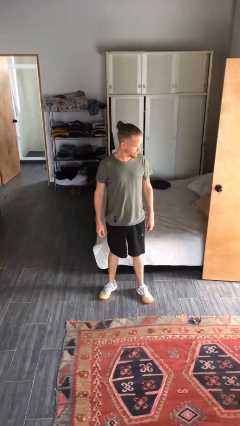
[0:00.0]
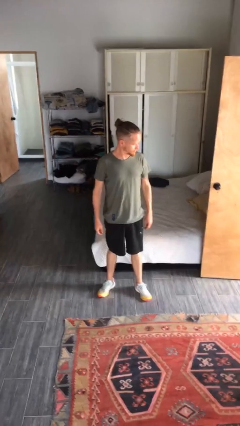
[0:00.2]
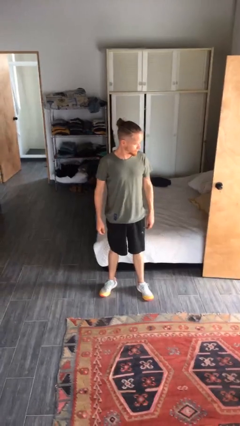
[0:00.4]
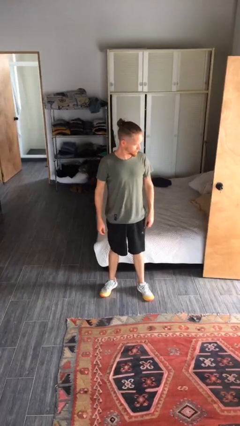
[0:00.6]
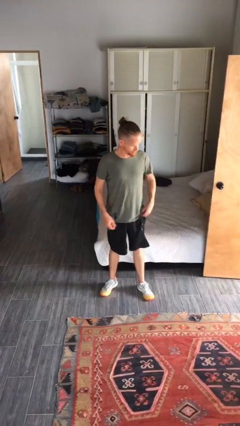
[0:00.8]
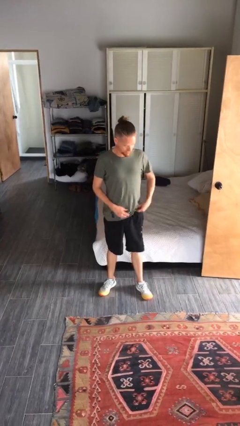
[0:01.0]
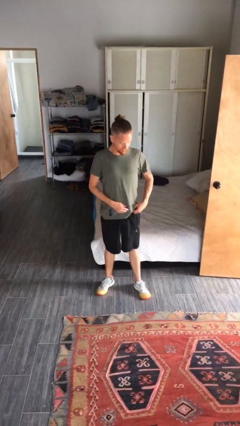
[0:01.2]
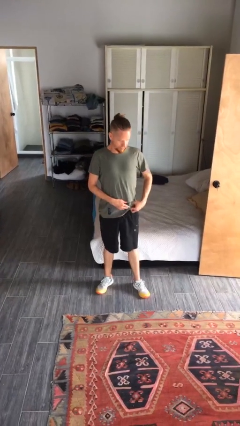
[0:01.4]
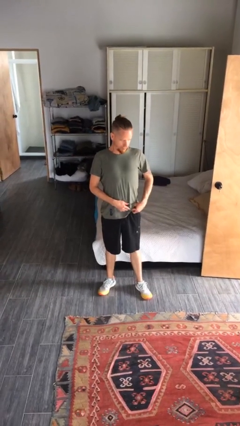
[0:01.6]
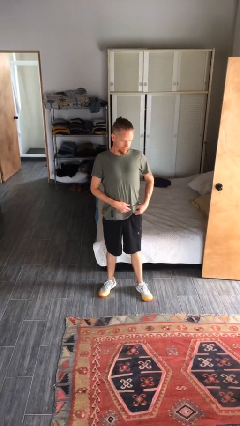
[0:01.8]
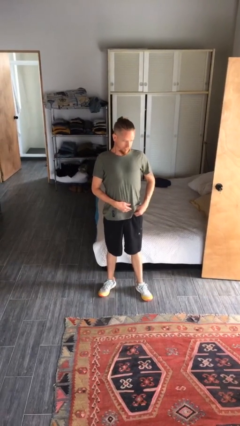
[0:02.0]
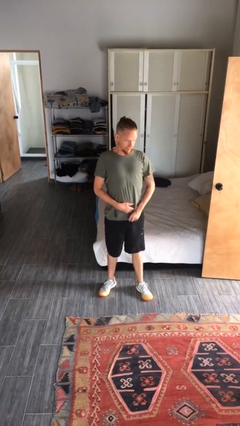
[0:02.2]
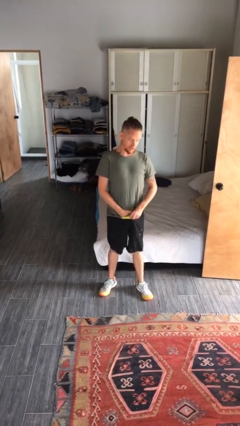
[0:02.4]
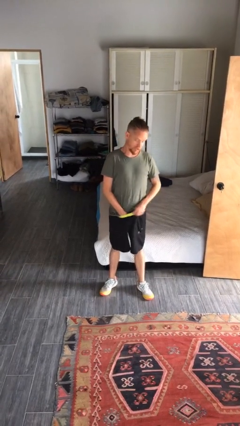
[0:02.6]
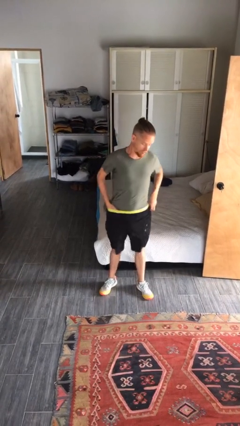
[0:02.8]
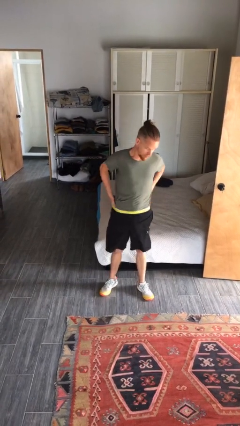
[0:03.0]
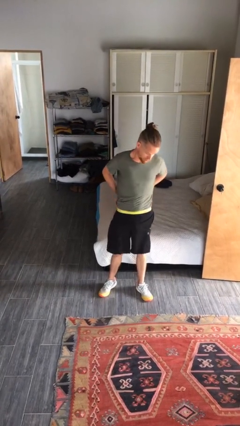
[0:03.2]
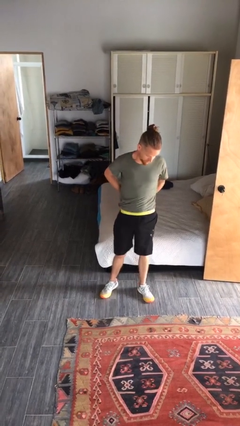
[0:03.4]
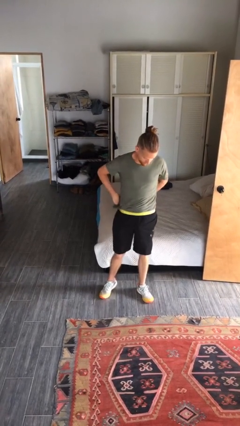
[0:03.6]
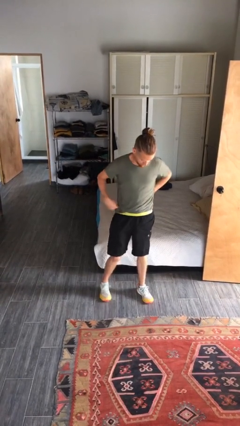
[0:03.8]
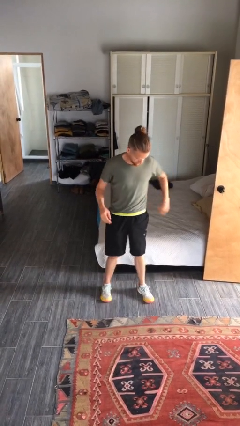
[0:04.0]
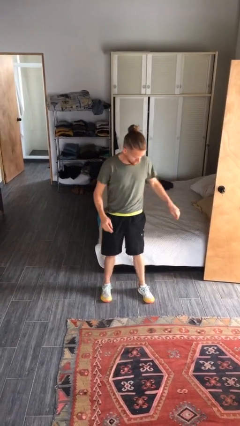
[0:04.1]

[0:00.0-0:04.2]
person tucks in shirt

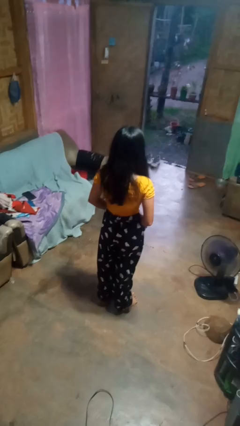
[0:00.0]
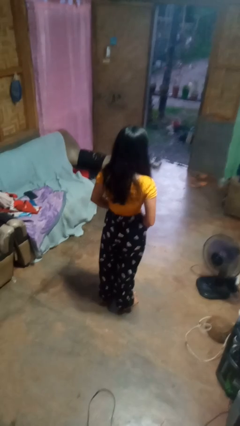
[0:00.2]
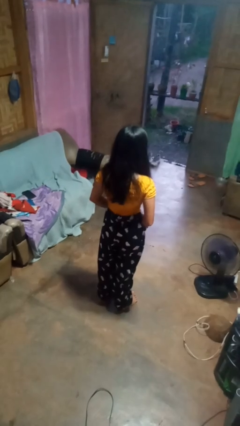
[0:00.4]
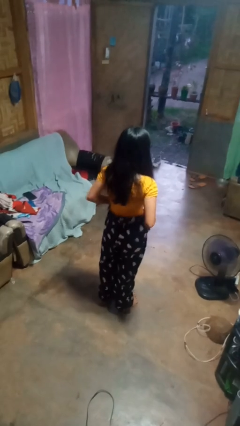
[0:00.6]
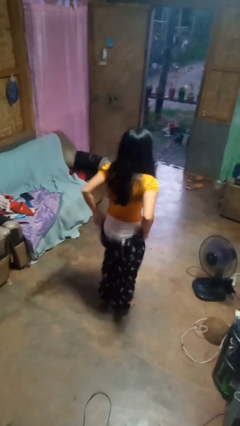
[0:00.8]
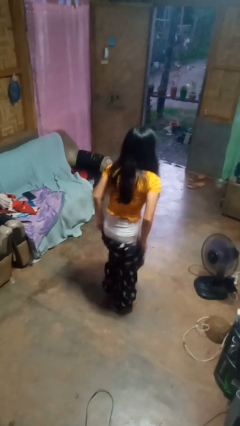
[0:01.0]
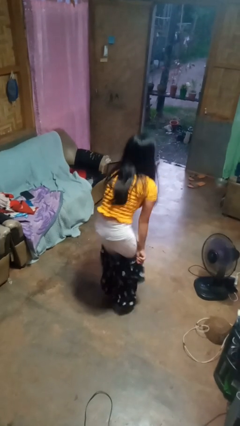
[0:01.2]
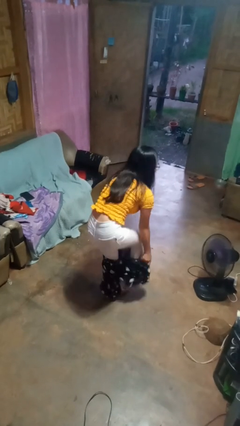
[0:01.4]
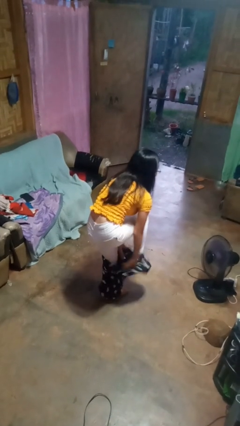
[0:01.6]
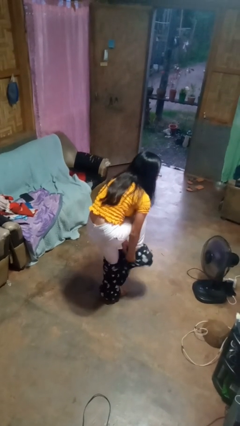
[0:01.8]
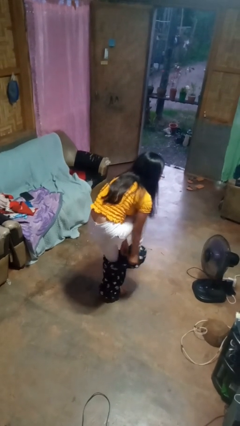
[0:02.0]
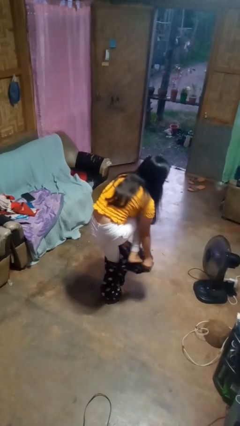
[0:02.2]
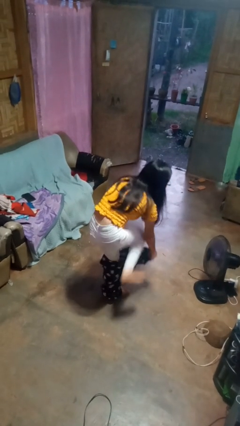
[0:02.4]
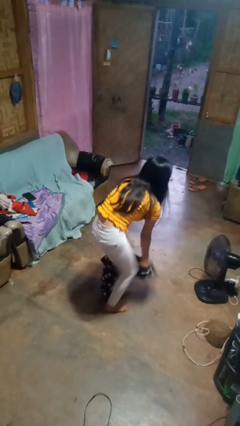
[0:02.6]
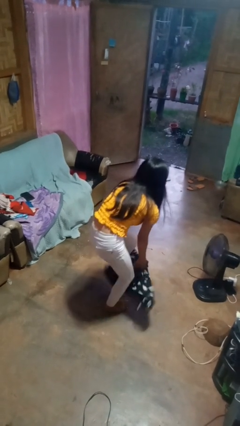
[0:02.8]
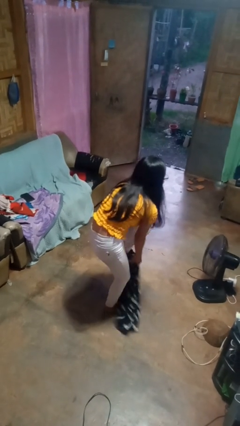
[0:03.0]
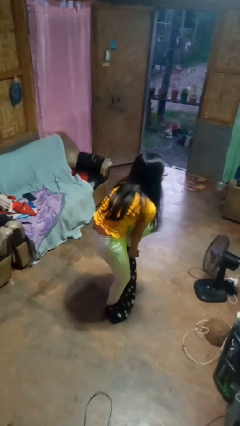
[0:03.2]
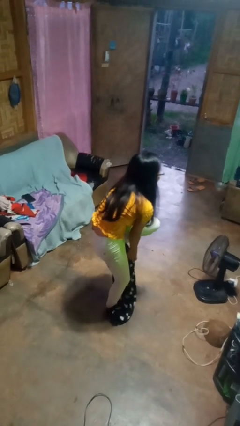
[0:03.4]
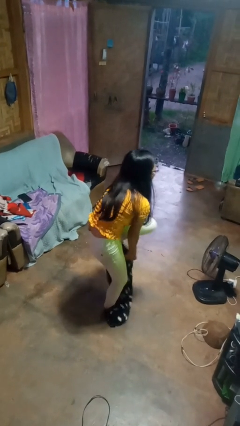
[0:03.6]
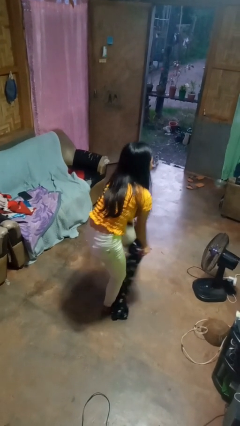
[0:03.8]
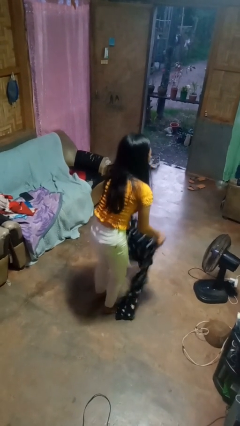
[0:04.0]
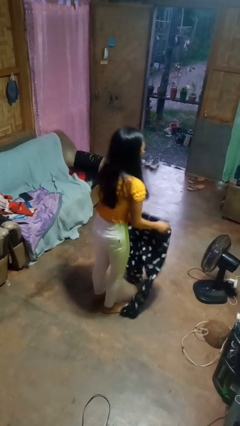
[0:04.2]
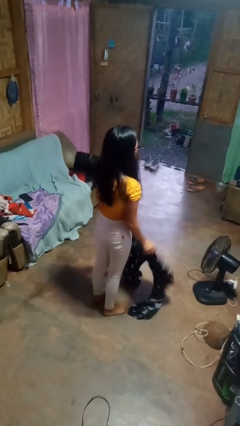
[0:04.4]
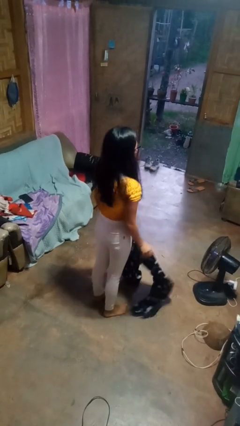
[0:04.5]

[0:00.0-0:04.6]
person takes off pants

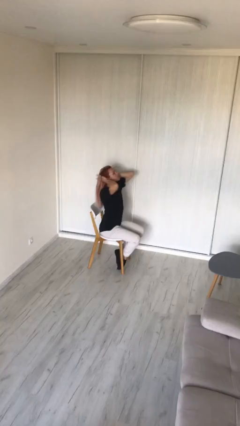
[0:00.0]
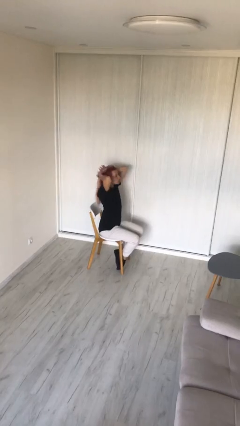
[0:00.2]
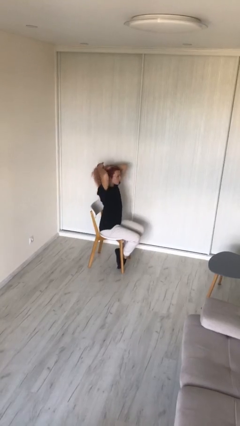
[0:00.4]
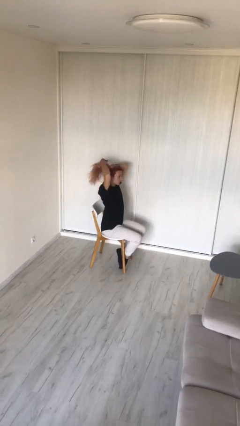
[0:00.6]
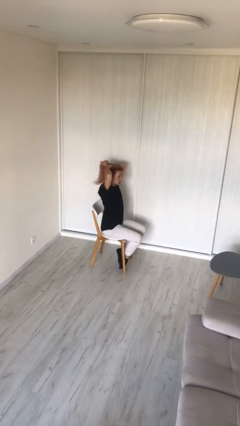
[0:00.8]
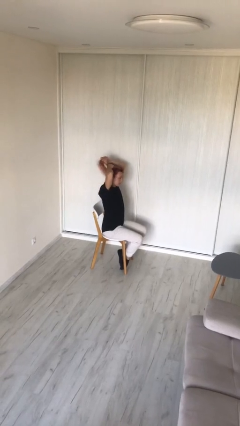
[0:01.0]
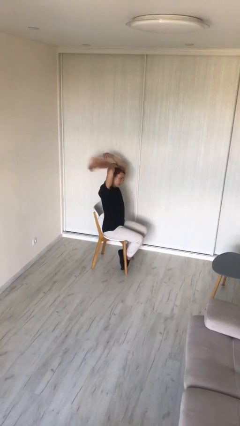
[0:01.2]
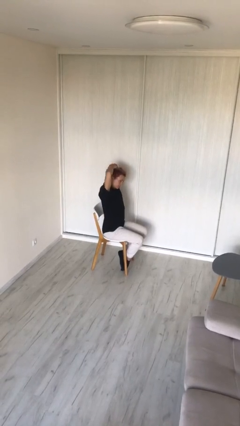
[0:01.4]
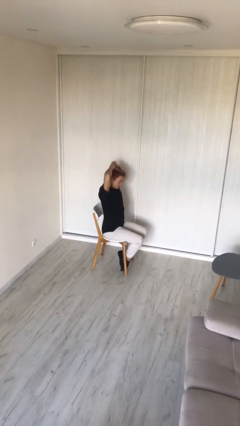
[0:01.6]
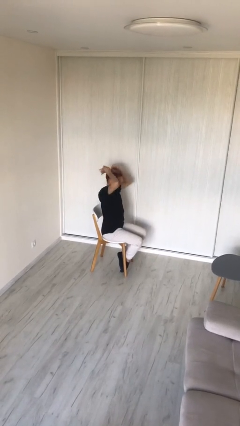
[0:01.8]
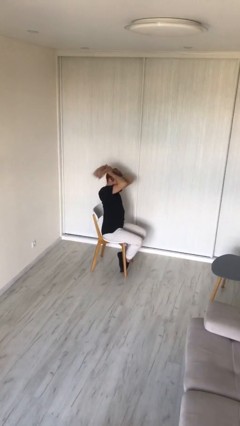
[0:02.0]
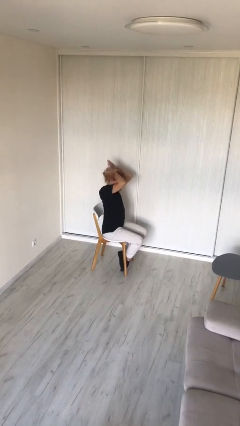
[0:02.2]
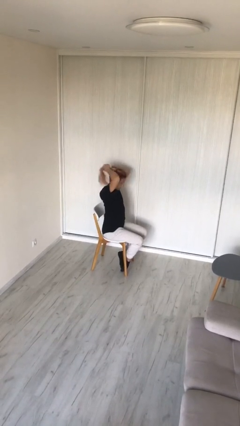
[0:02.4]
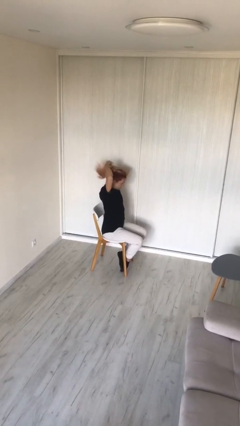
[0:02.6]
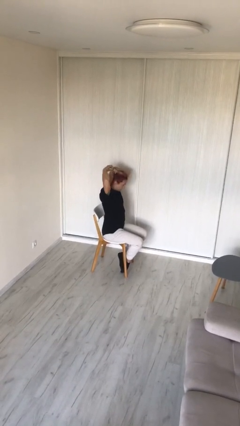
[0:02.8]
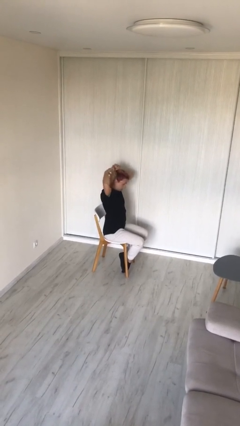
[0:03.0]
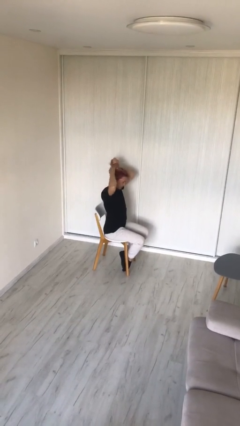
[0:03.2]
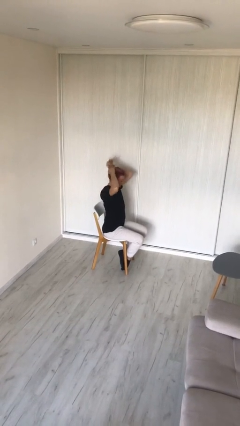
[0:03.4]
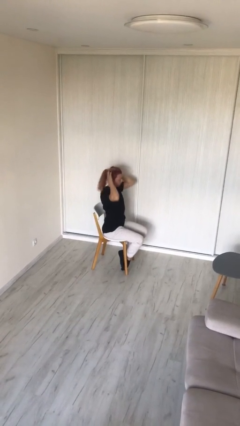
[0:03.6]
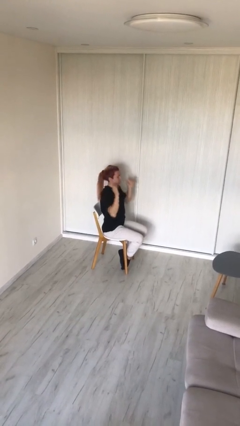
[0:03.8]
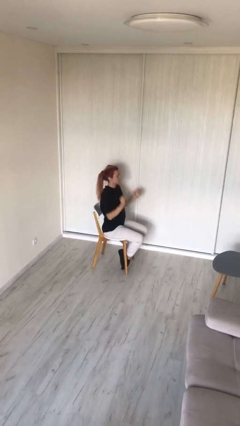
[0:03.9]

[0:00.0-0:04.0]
person puts hair in ponytail

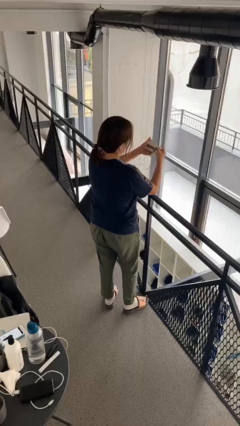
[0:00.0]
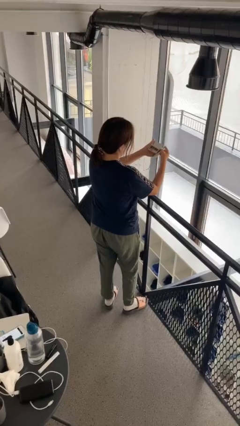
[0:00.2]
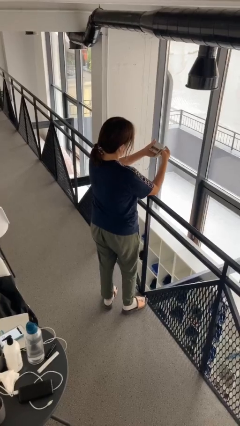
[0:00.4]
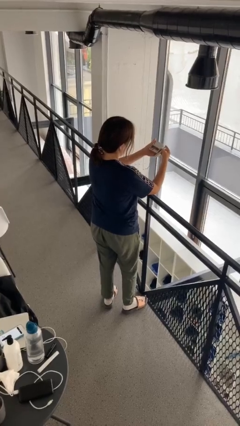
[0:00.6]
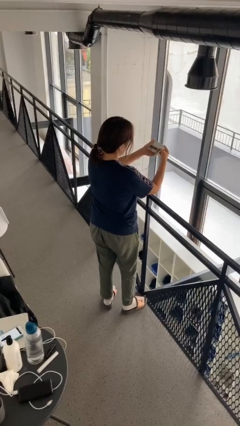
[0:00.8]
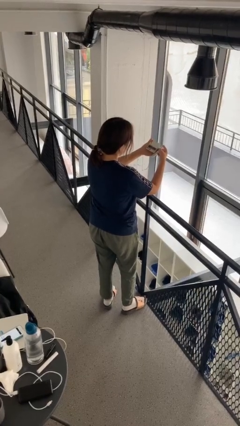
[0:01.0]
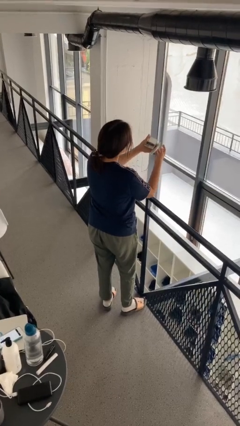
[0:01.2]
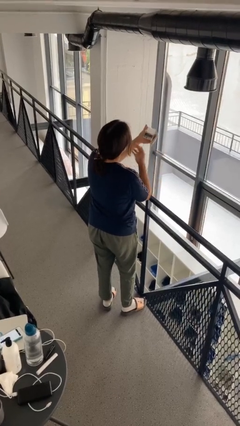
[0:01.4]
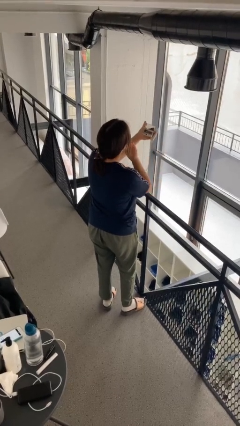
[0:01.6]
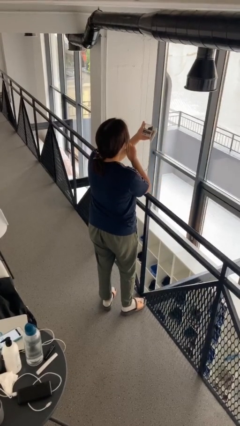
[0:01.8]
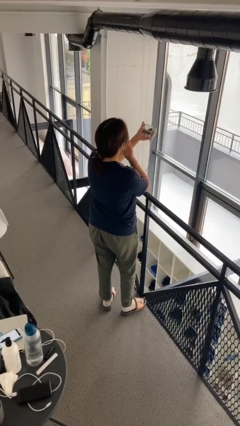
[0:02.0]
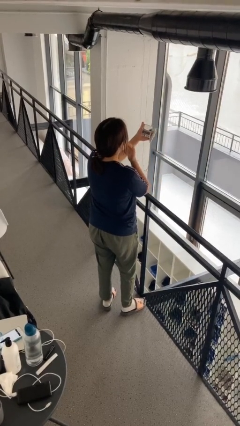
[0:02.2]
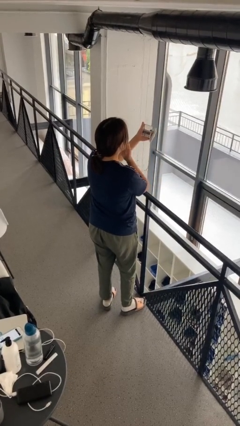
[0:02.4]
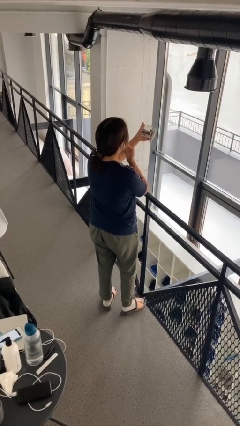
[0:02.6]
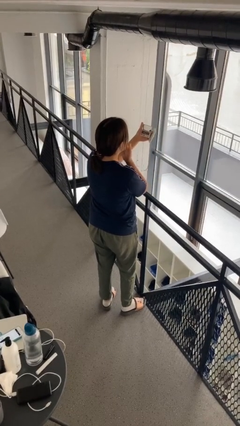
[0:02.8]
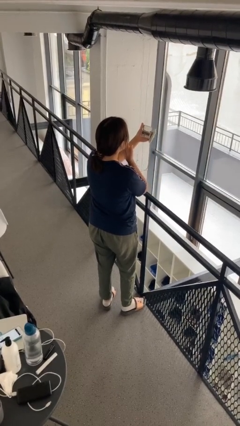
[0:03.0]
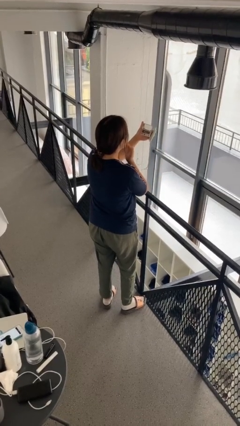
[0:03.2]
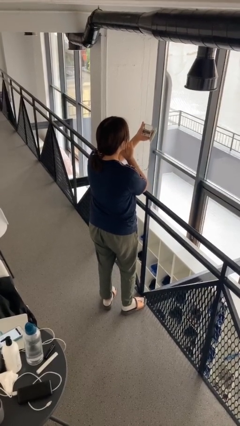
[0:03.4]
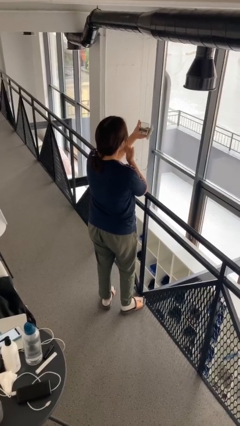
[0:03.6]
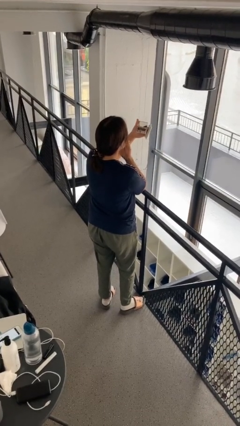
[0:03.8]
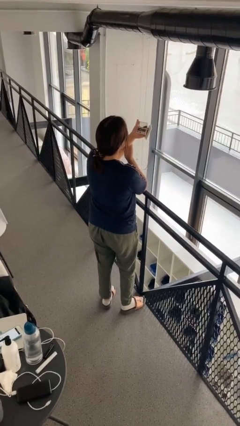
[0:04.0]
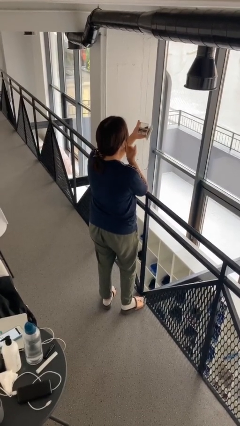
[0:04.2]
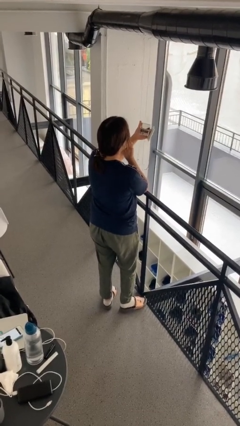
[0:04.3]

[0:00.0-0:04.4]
person applies foundation makeup

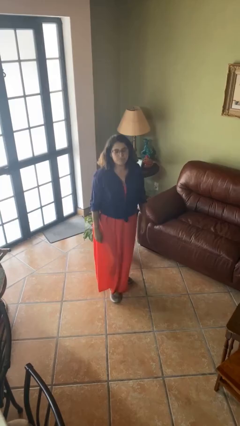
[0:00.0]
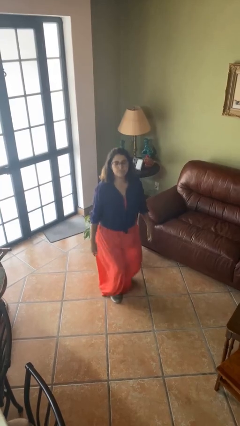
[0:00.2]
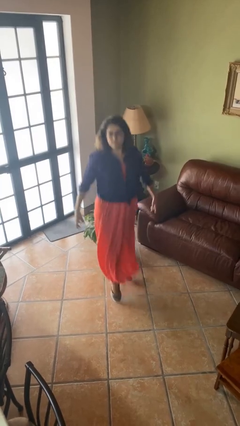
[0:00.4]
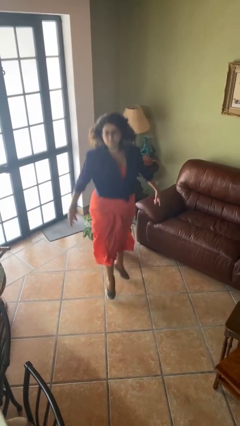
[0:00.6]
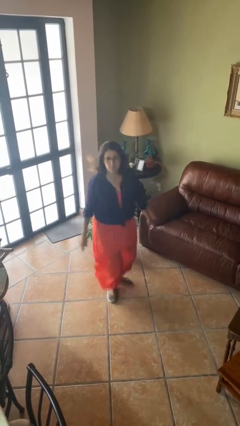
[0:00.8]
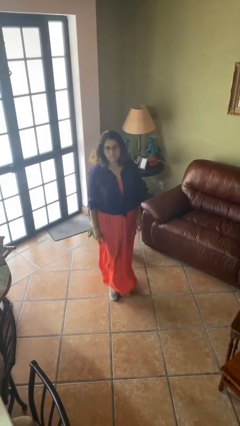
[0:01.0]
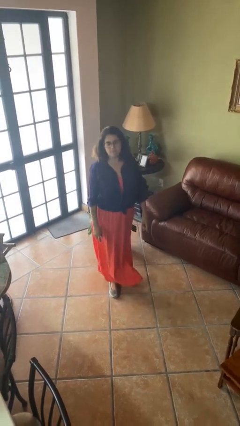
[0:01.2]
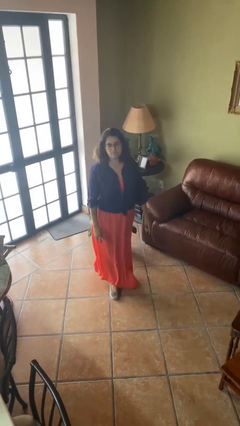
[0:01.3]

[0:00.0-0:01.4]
person jumps
